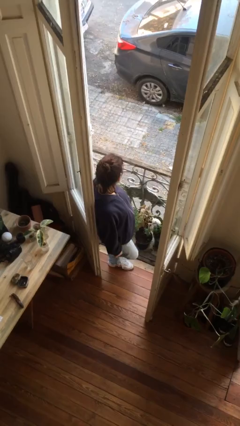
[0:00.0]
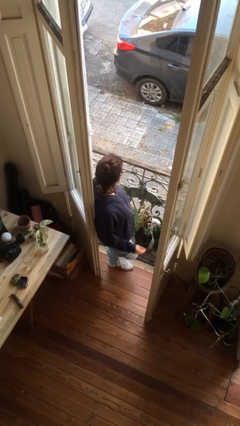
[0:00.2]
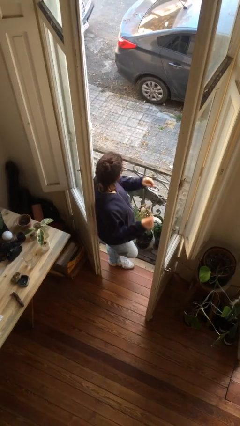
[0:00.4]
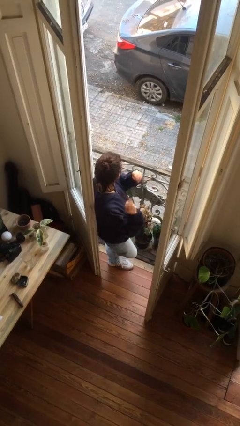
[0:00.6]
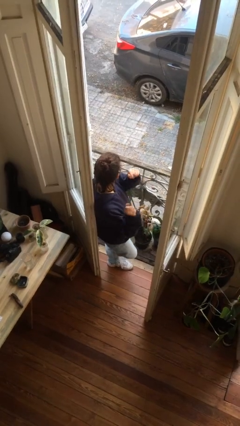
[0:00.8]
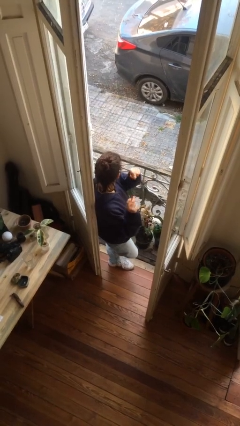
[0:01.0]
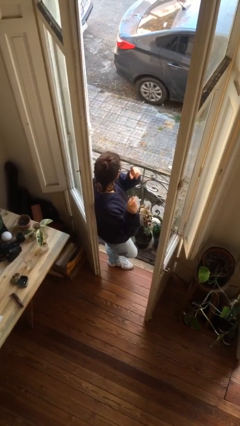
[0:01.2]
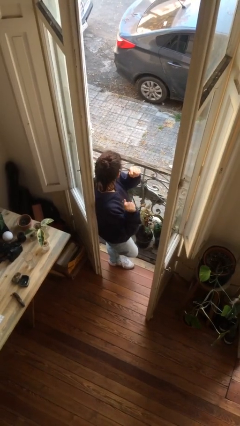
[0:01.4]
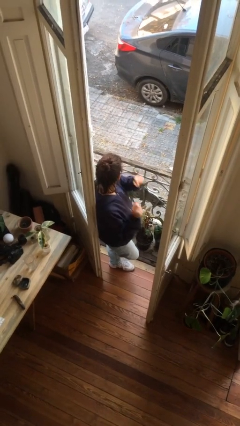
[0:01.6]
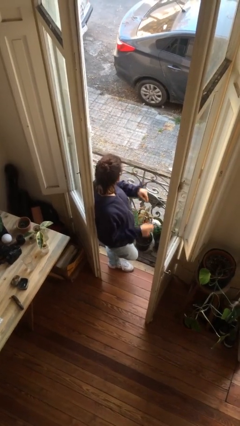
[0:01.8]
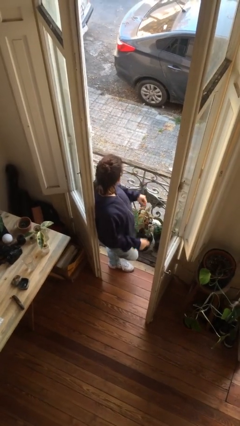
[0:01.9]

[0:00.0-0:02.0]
person snaps fingers

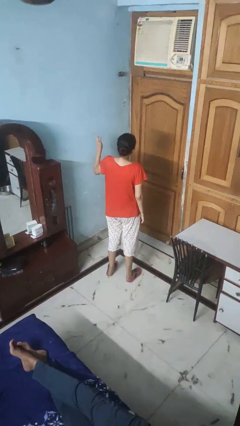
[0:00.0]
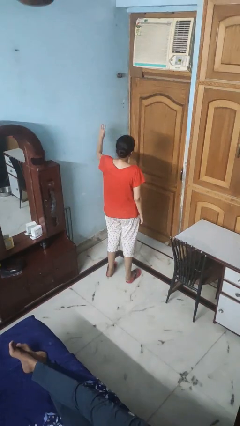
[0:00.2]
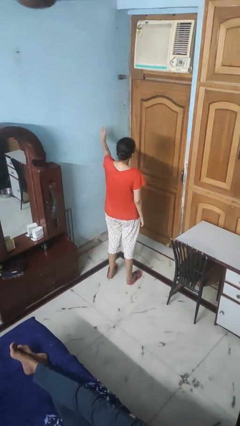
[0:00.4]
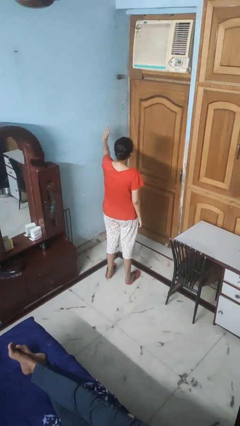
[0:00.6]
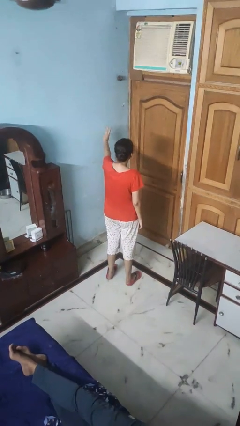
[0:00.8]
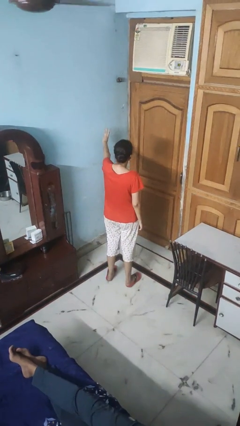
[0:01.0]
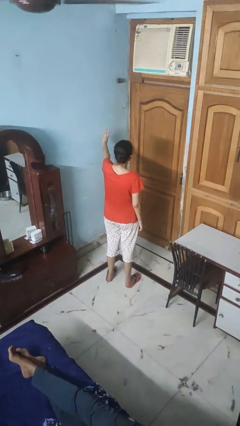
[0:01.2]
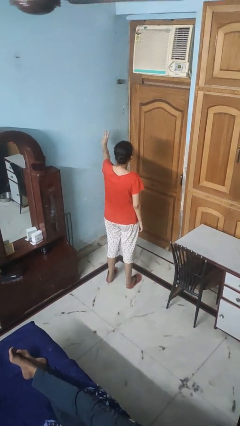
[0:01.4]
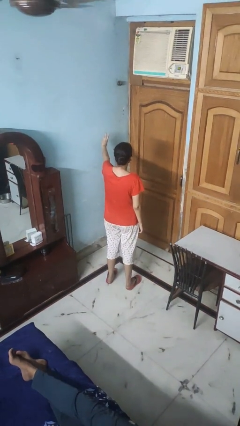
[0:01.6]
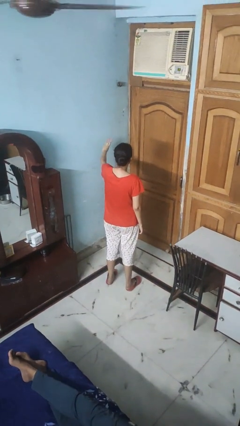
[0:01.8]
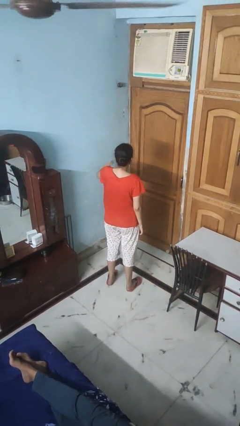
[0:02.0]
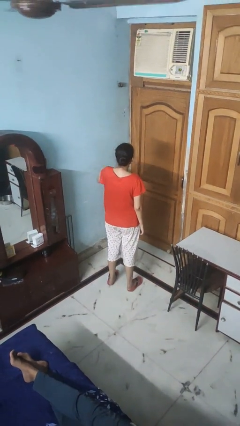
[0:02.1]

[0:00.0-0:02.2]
person gestures number three

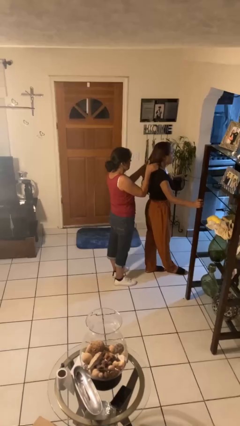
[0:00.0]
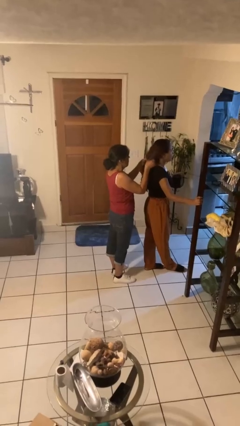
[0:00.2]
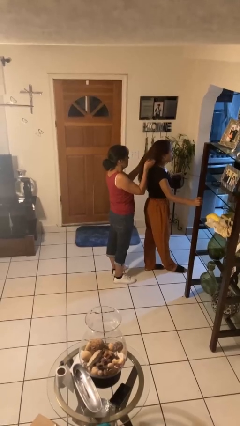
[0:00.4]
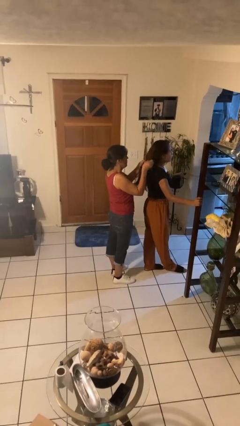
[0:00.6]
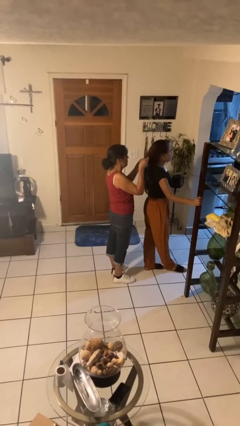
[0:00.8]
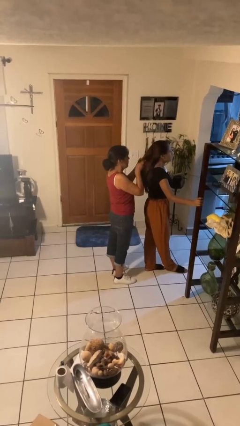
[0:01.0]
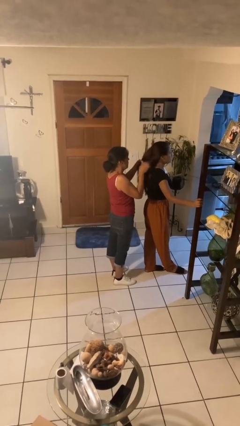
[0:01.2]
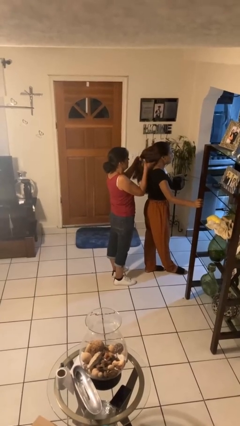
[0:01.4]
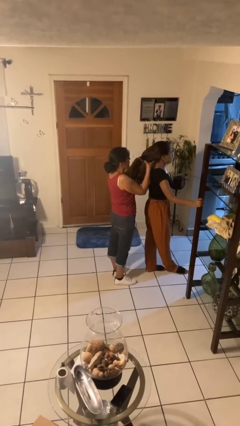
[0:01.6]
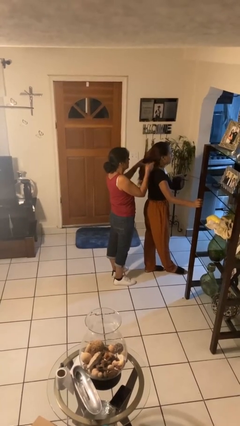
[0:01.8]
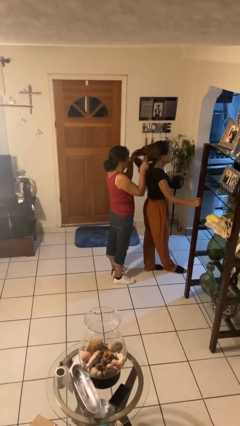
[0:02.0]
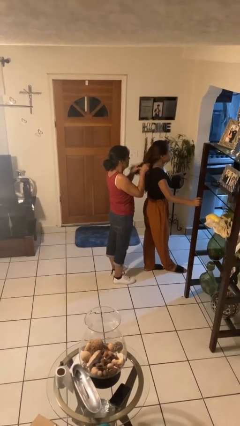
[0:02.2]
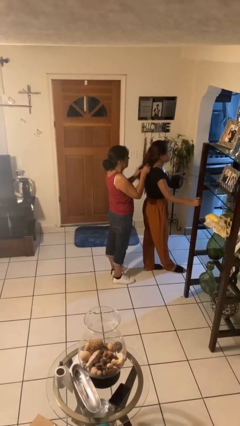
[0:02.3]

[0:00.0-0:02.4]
person braids hair of person

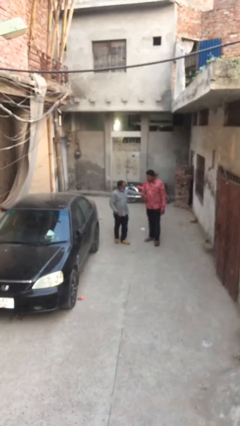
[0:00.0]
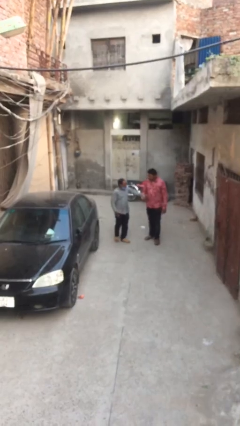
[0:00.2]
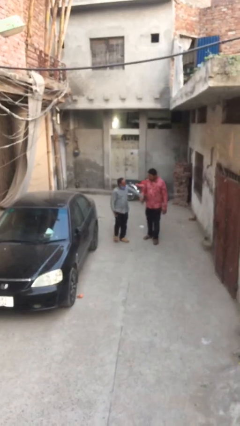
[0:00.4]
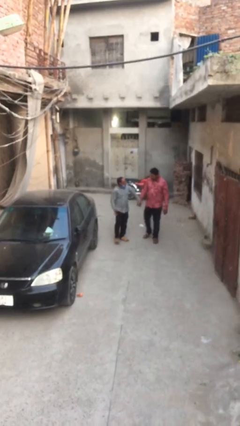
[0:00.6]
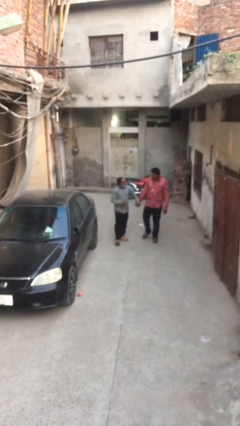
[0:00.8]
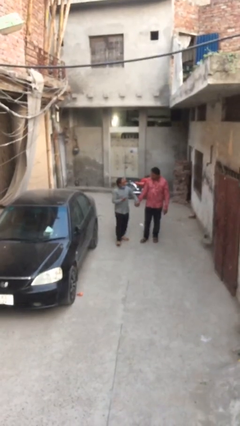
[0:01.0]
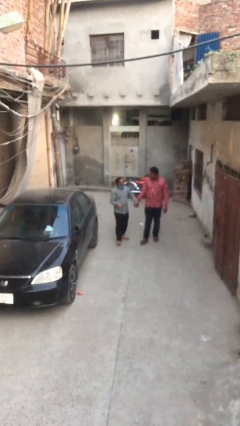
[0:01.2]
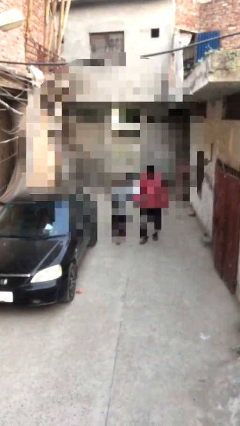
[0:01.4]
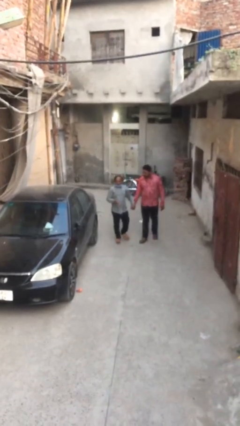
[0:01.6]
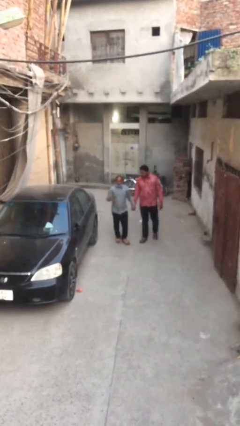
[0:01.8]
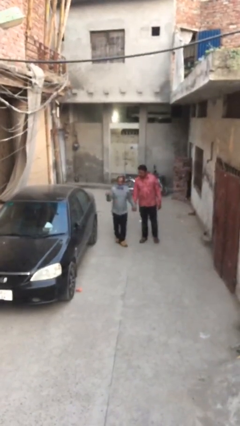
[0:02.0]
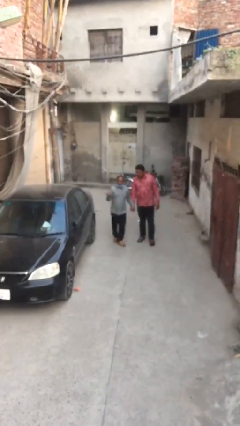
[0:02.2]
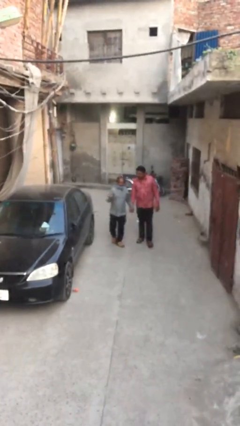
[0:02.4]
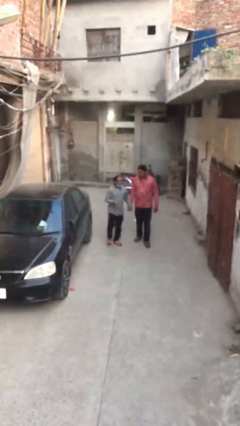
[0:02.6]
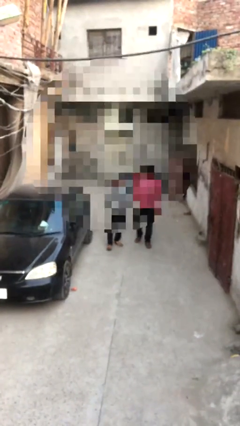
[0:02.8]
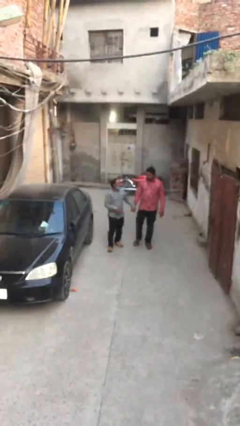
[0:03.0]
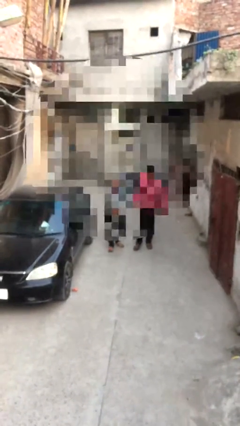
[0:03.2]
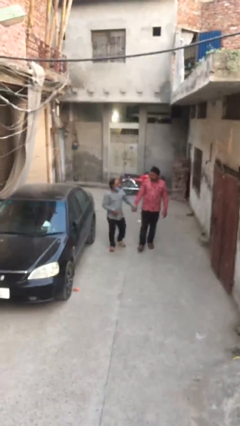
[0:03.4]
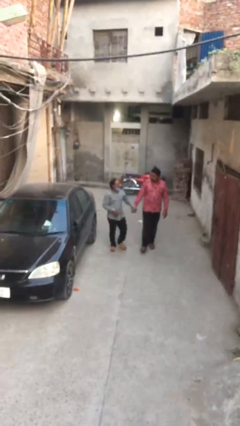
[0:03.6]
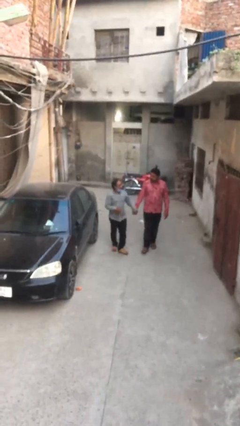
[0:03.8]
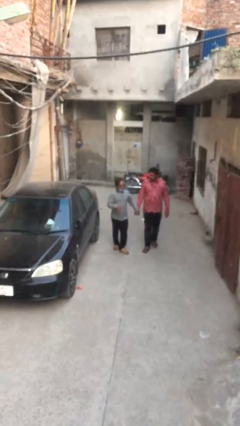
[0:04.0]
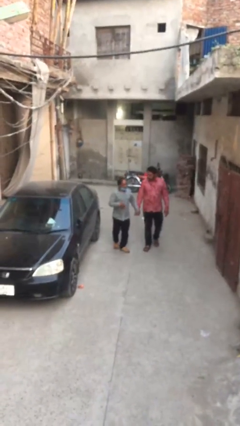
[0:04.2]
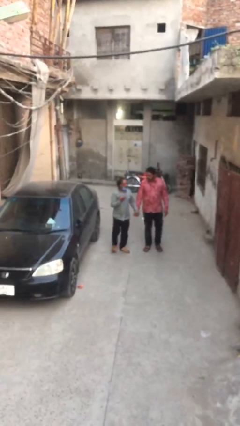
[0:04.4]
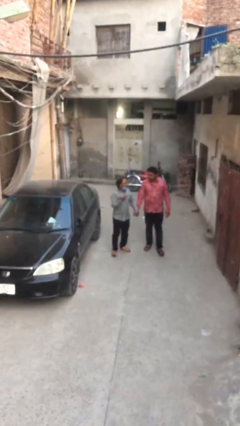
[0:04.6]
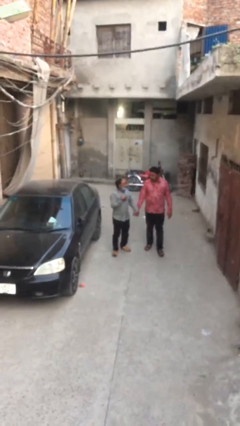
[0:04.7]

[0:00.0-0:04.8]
person holds hand

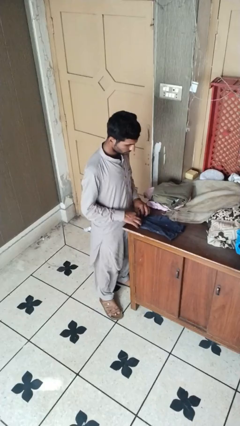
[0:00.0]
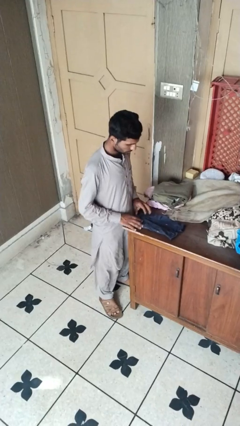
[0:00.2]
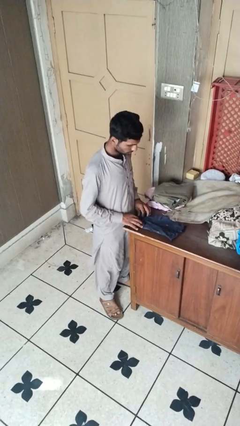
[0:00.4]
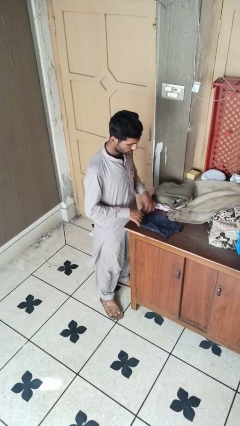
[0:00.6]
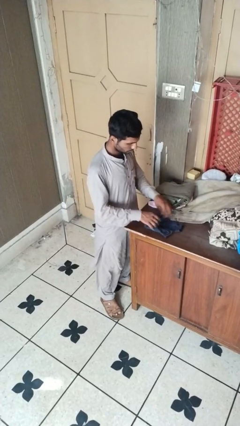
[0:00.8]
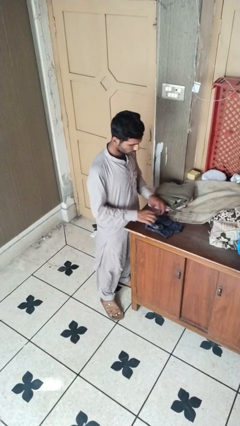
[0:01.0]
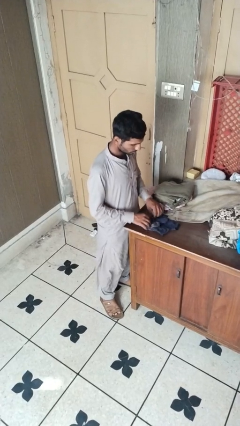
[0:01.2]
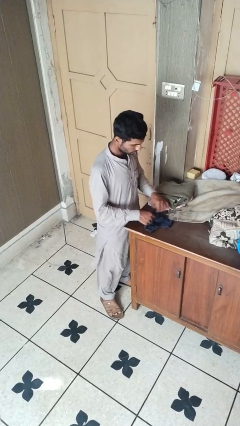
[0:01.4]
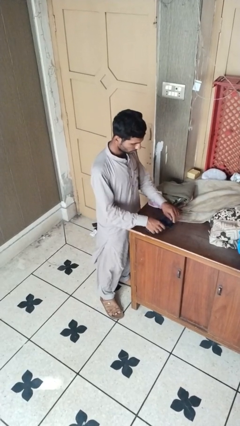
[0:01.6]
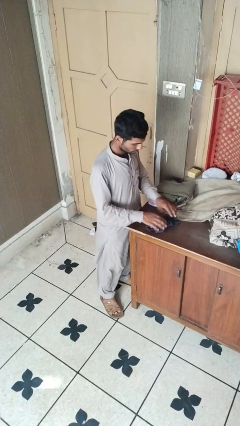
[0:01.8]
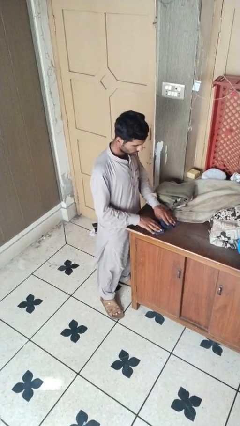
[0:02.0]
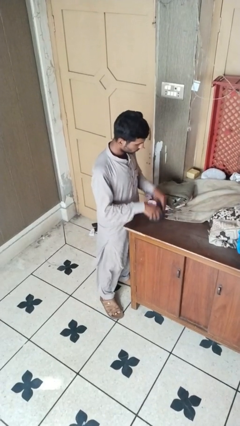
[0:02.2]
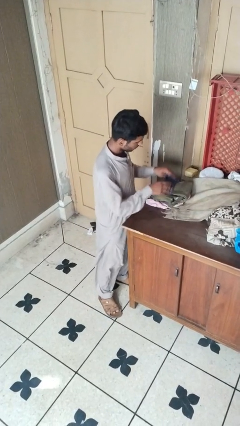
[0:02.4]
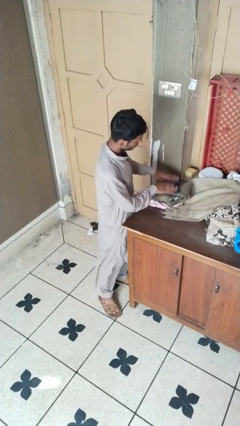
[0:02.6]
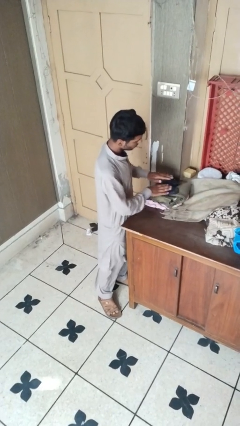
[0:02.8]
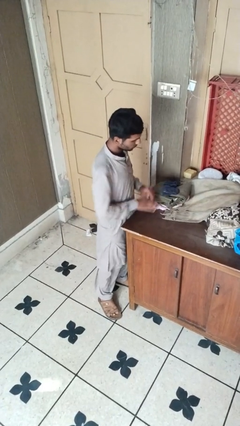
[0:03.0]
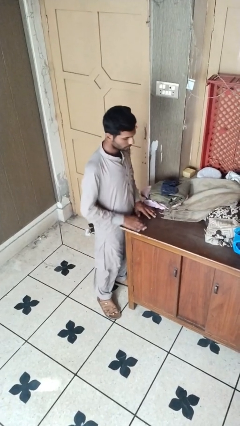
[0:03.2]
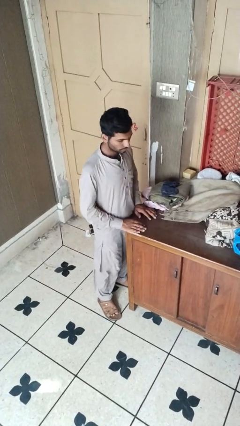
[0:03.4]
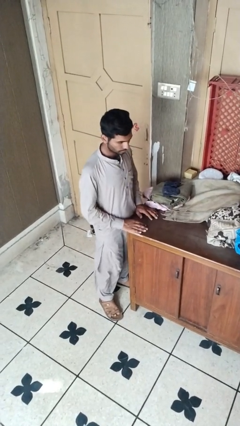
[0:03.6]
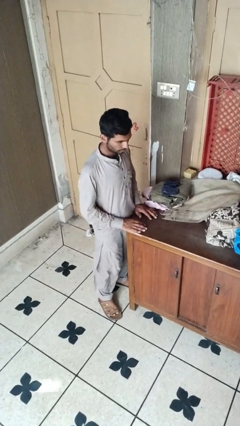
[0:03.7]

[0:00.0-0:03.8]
person folds socks

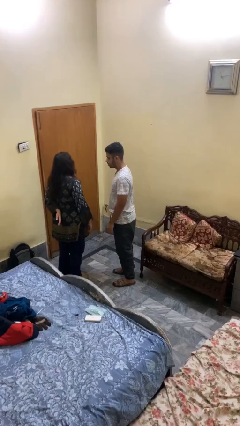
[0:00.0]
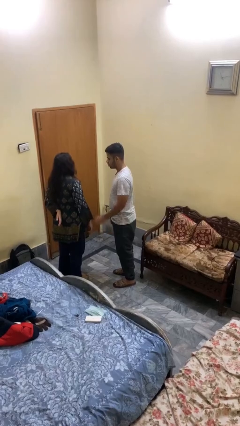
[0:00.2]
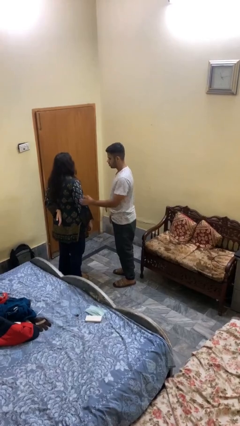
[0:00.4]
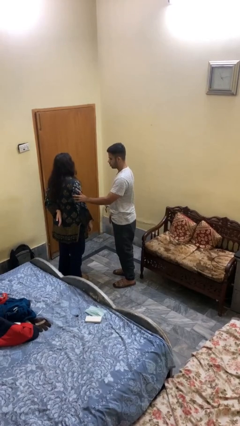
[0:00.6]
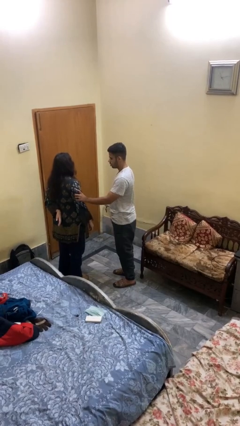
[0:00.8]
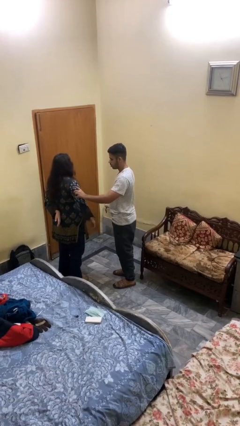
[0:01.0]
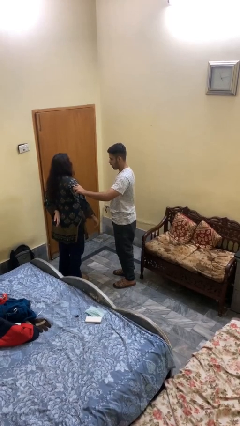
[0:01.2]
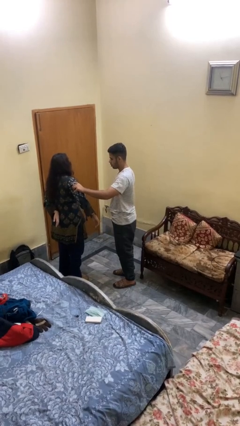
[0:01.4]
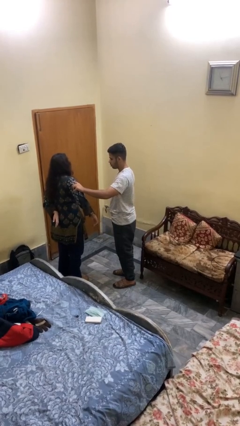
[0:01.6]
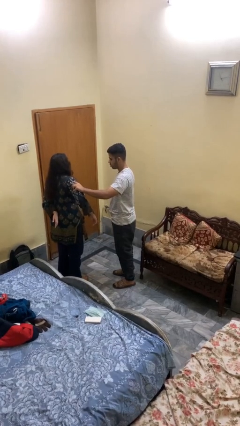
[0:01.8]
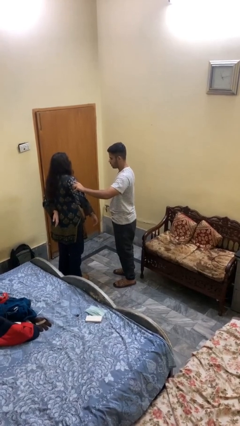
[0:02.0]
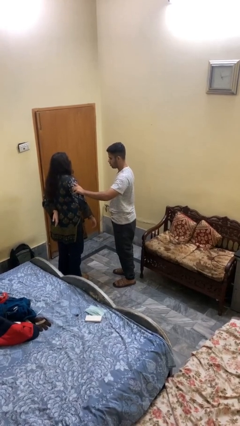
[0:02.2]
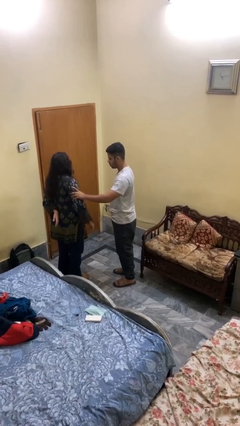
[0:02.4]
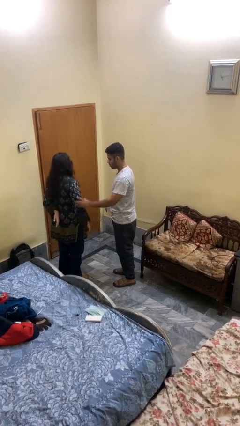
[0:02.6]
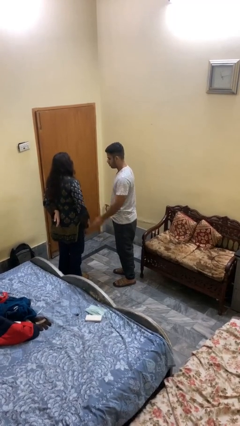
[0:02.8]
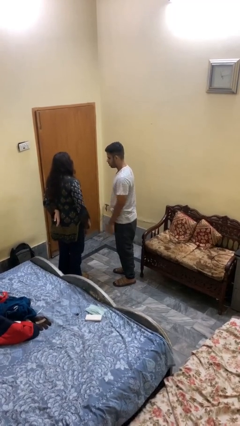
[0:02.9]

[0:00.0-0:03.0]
person grabs person by bicep
